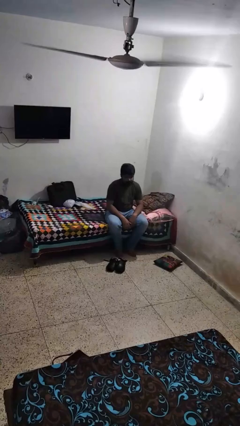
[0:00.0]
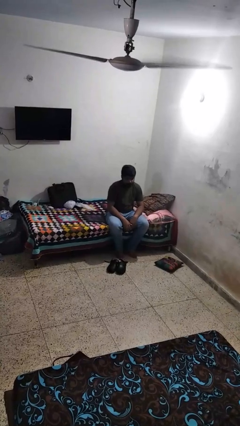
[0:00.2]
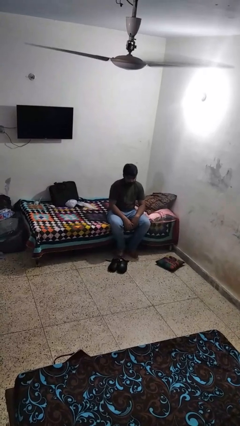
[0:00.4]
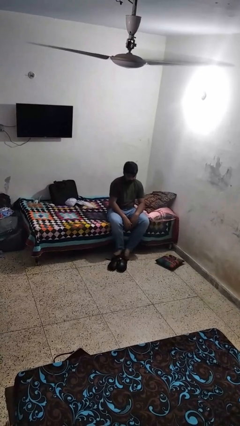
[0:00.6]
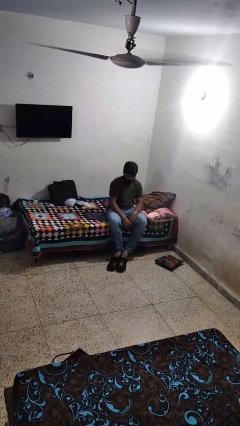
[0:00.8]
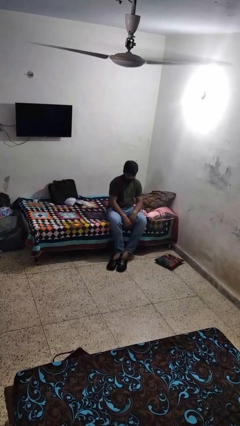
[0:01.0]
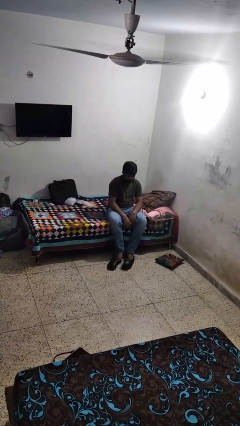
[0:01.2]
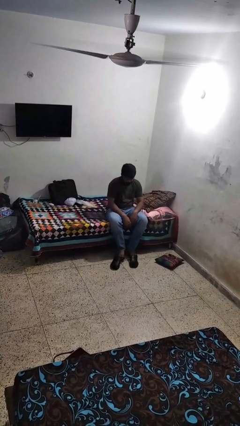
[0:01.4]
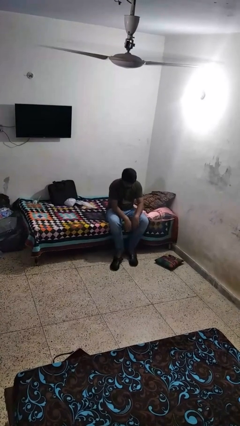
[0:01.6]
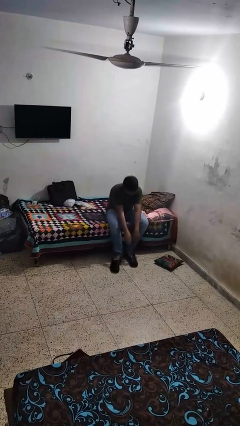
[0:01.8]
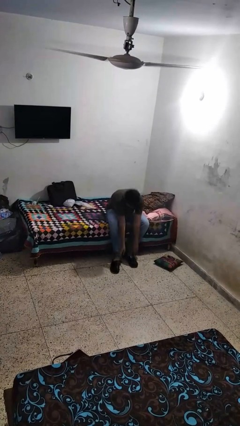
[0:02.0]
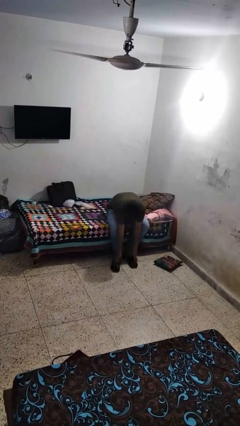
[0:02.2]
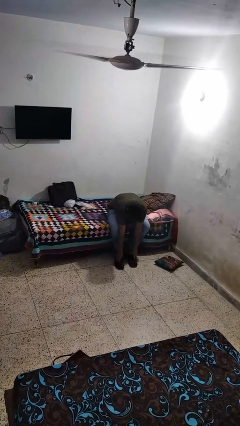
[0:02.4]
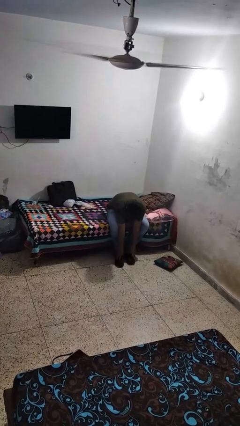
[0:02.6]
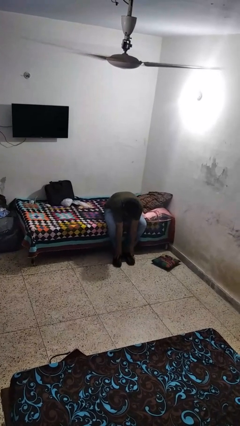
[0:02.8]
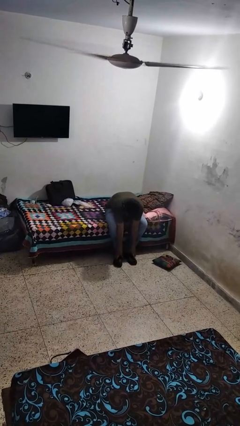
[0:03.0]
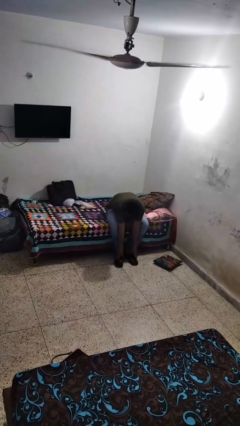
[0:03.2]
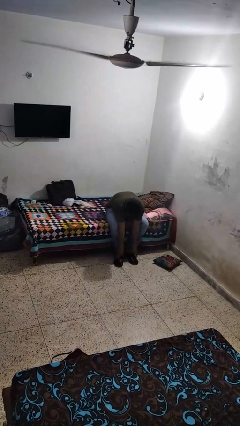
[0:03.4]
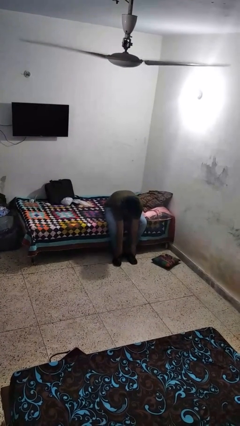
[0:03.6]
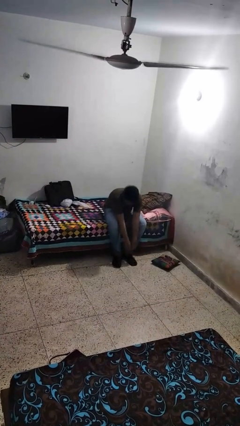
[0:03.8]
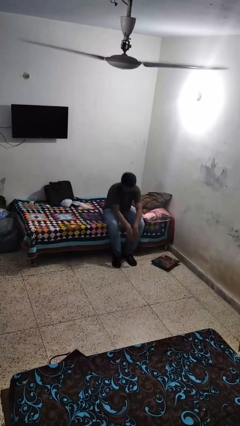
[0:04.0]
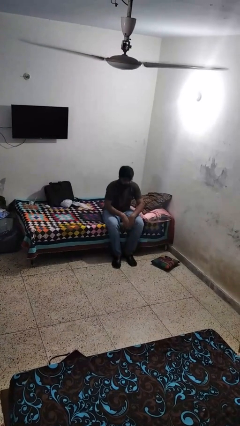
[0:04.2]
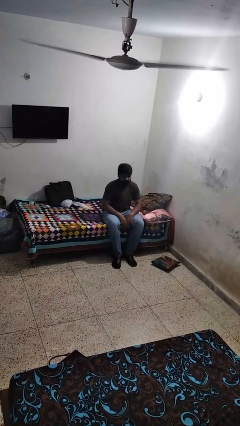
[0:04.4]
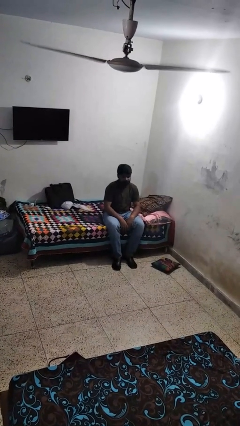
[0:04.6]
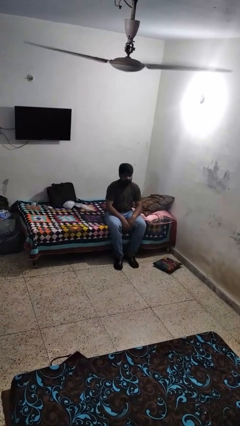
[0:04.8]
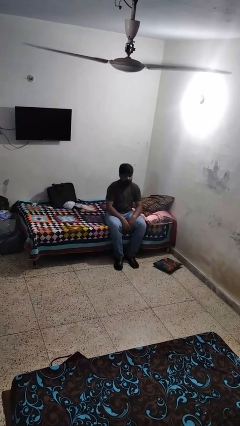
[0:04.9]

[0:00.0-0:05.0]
person puts on shoes

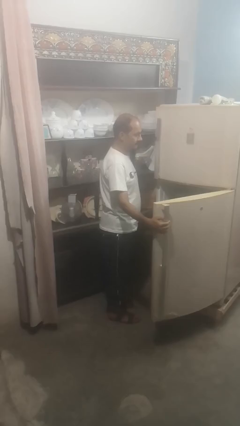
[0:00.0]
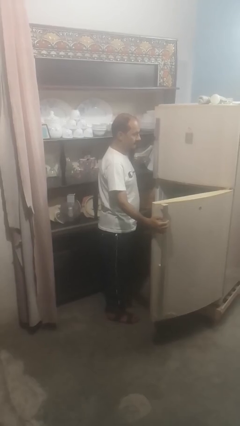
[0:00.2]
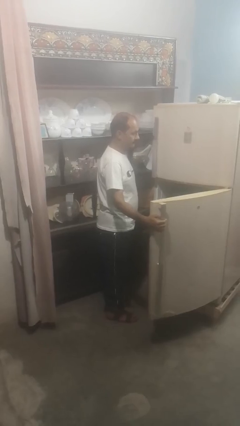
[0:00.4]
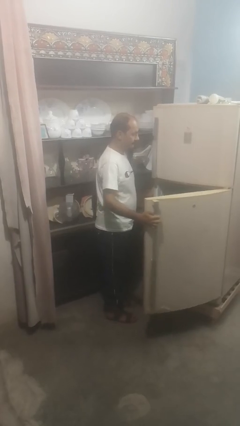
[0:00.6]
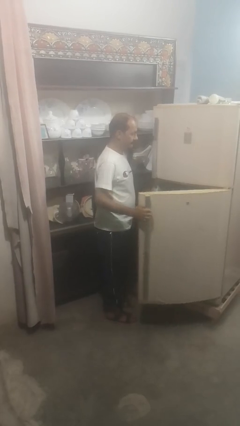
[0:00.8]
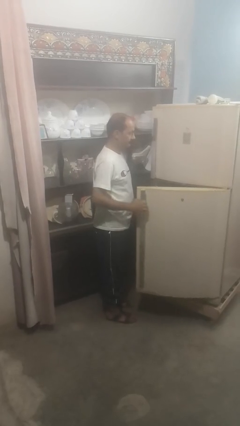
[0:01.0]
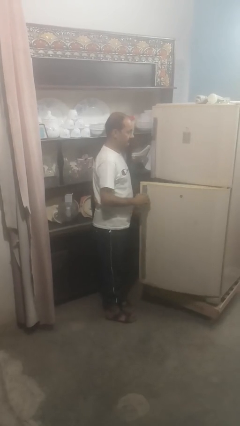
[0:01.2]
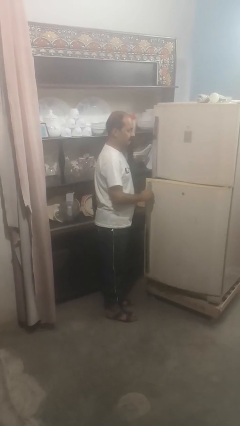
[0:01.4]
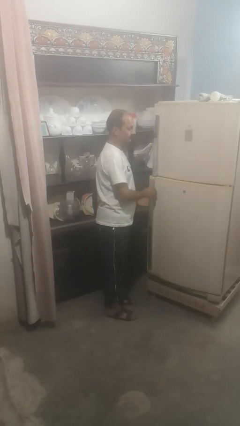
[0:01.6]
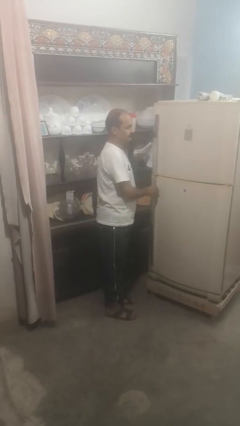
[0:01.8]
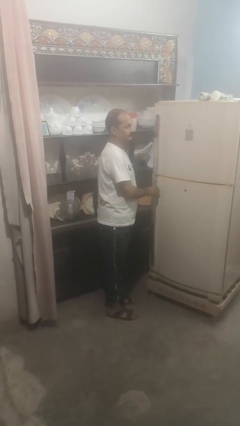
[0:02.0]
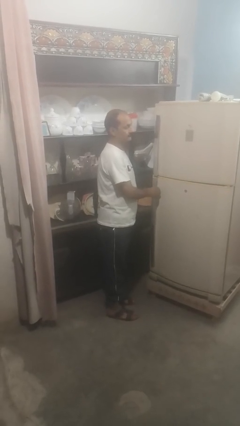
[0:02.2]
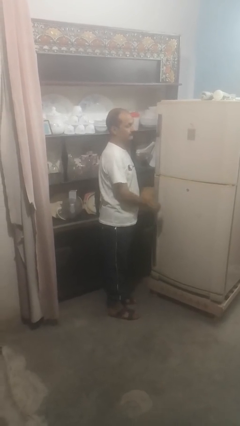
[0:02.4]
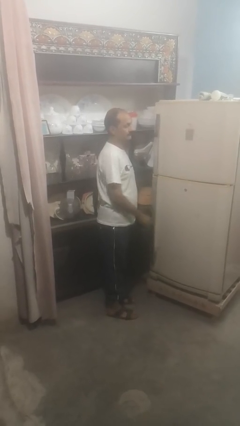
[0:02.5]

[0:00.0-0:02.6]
person closes refrigerator

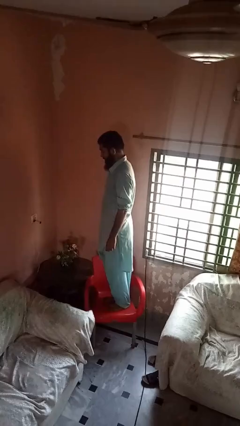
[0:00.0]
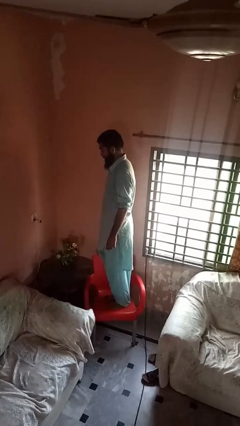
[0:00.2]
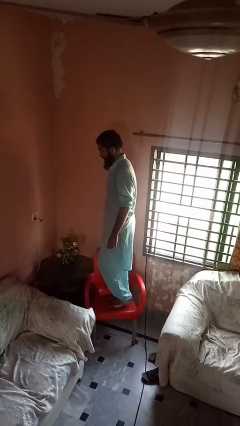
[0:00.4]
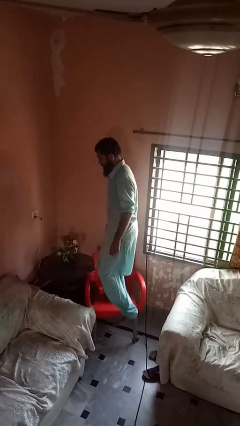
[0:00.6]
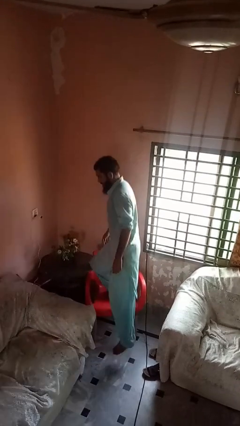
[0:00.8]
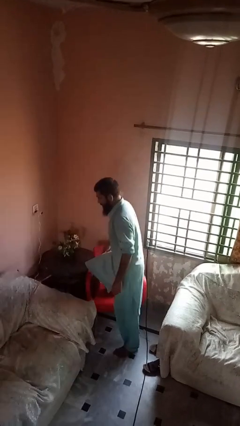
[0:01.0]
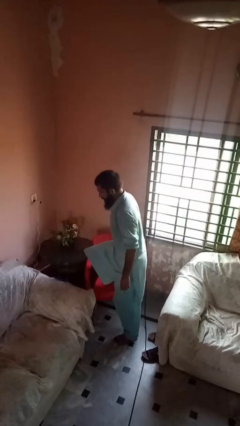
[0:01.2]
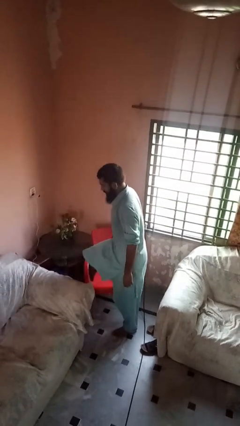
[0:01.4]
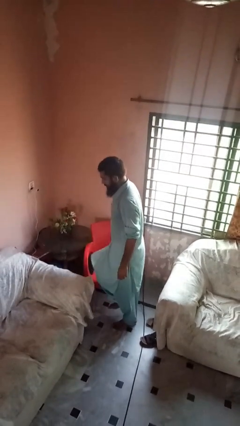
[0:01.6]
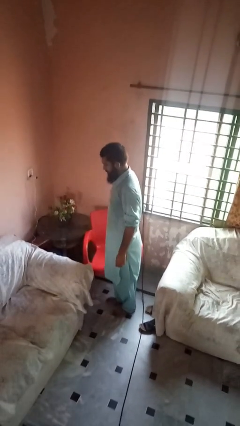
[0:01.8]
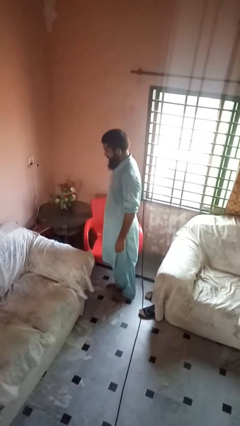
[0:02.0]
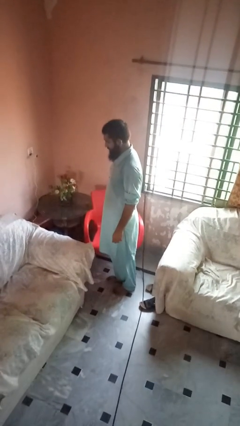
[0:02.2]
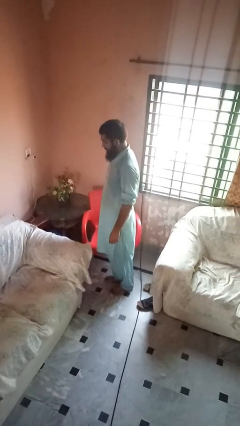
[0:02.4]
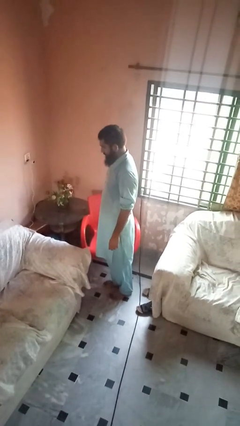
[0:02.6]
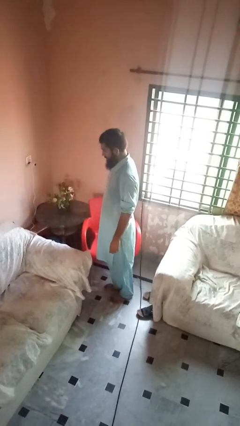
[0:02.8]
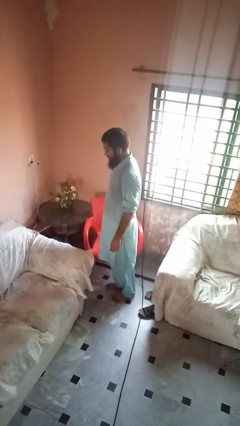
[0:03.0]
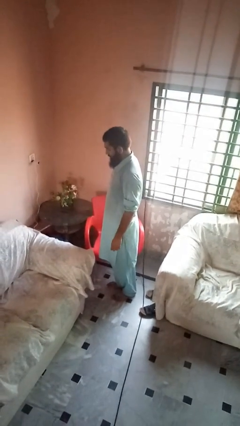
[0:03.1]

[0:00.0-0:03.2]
person climbs off chair

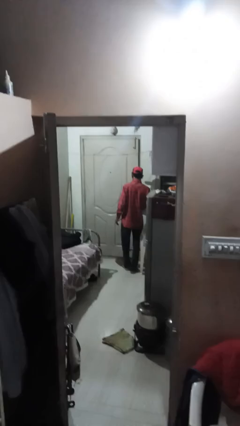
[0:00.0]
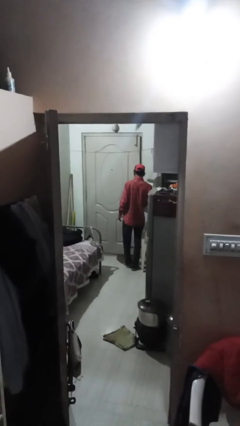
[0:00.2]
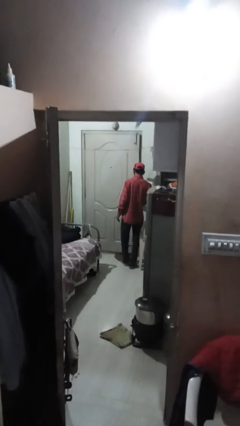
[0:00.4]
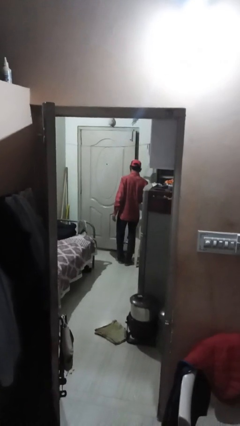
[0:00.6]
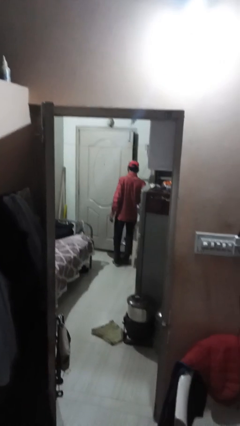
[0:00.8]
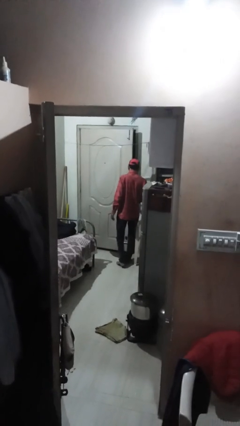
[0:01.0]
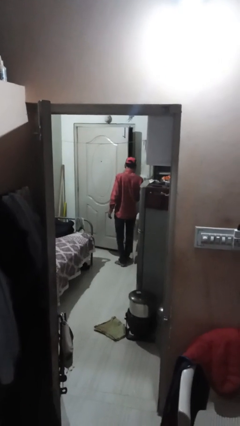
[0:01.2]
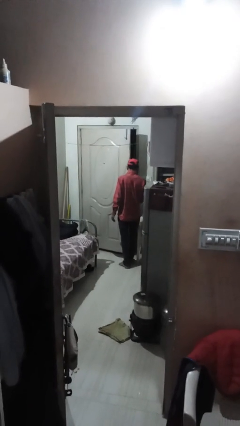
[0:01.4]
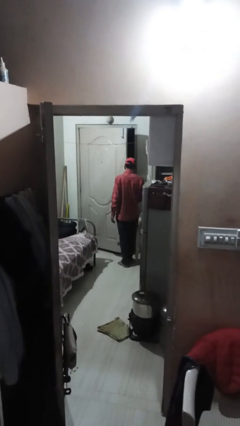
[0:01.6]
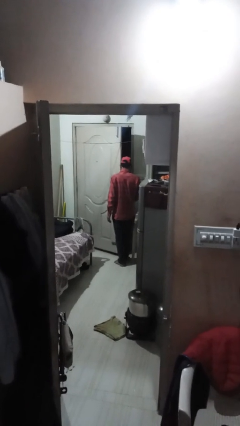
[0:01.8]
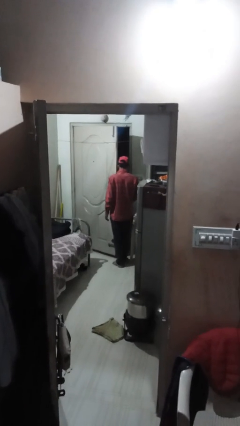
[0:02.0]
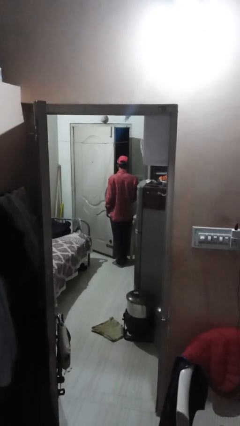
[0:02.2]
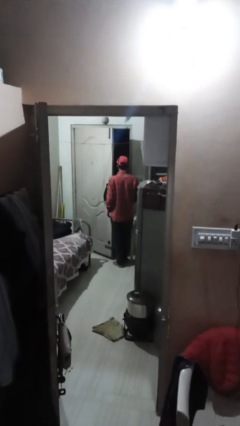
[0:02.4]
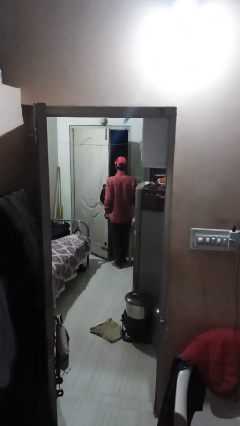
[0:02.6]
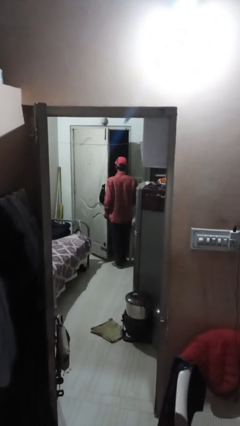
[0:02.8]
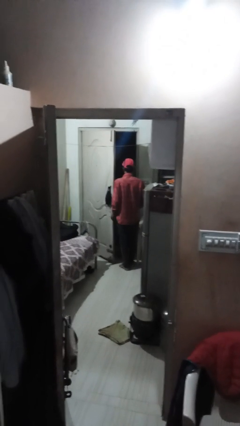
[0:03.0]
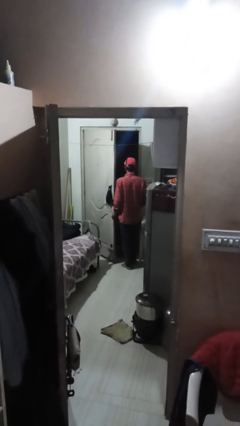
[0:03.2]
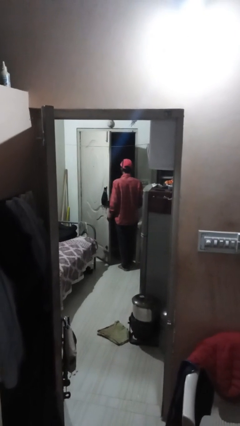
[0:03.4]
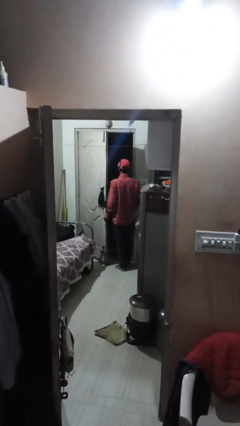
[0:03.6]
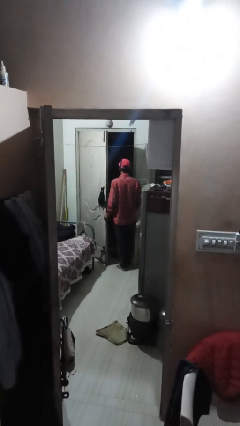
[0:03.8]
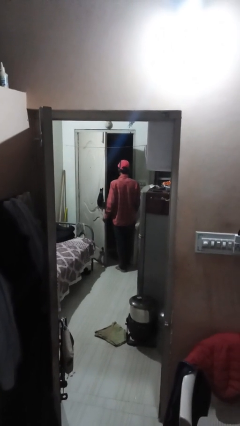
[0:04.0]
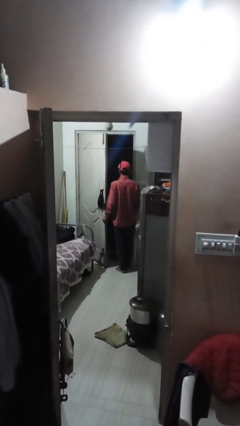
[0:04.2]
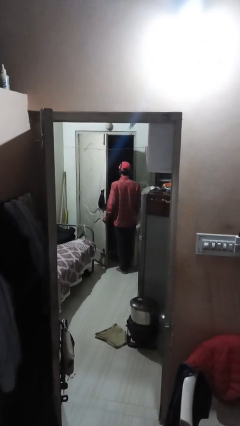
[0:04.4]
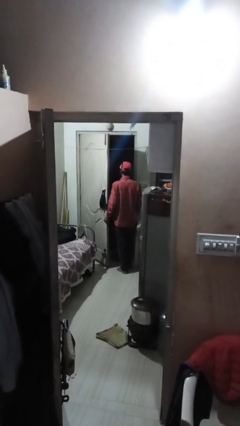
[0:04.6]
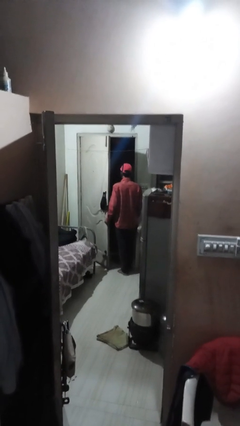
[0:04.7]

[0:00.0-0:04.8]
person opens facility door

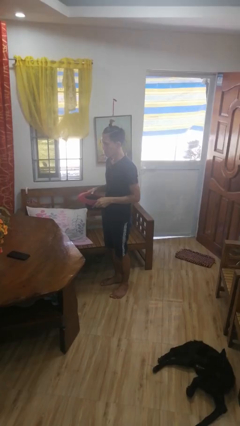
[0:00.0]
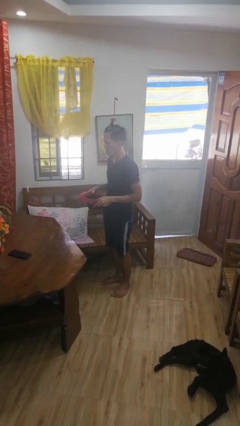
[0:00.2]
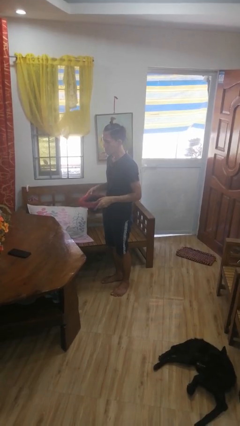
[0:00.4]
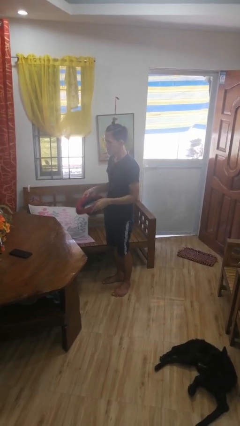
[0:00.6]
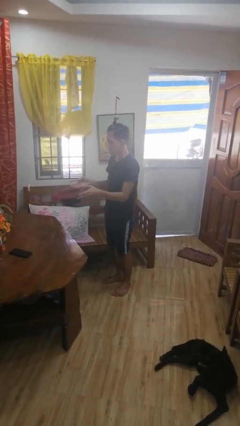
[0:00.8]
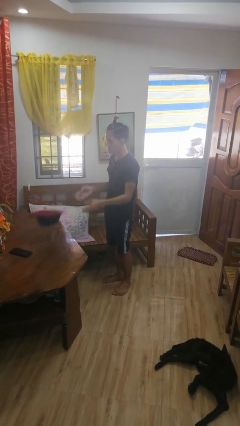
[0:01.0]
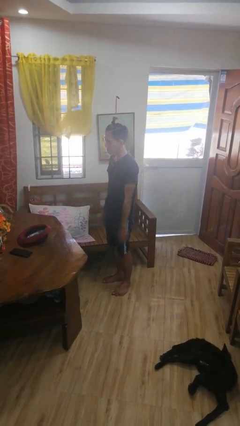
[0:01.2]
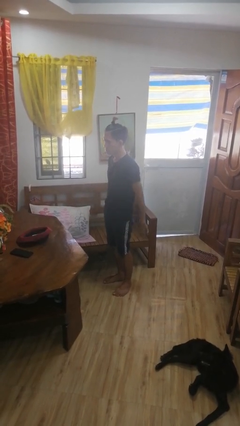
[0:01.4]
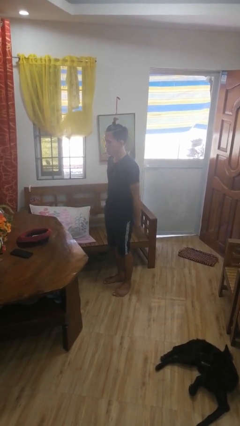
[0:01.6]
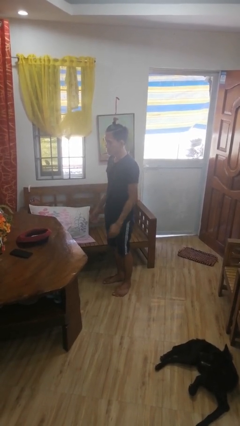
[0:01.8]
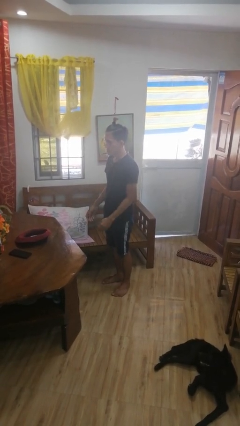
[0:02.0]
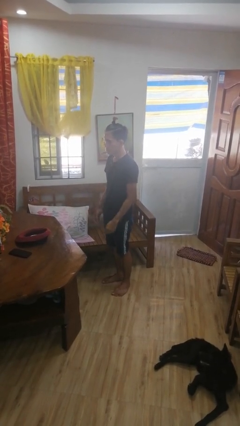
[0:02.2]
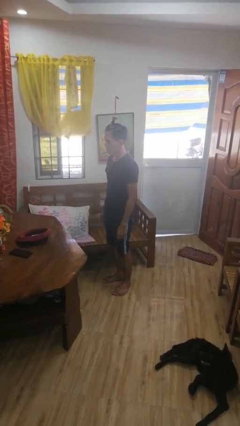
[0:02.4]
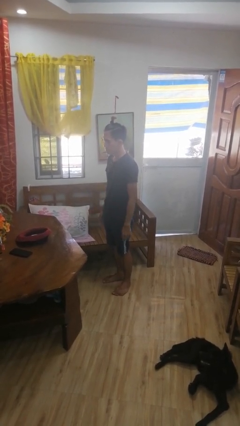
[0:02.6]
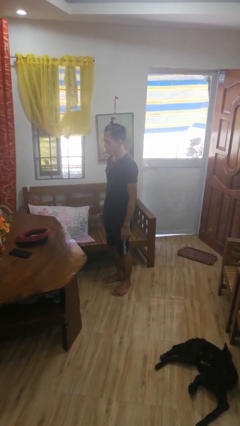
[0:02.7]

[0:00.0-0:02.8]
person throws object on table
